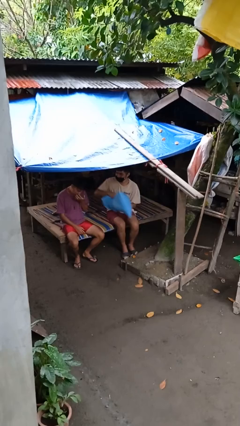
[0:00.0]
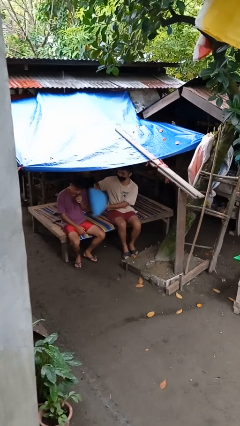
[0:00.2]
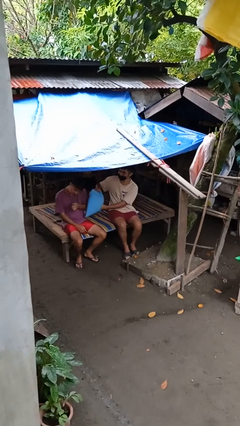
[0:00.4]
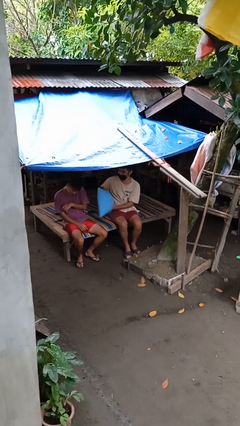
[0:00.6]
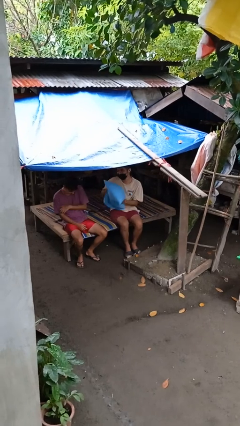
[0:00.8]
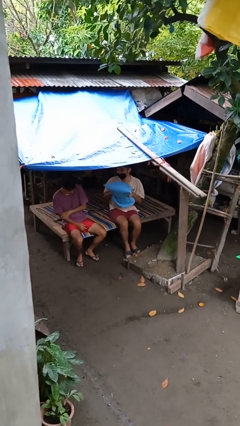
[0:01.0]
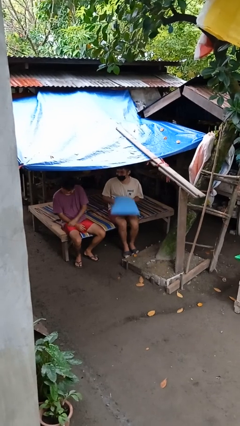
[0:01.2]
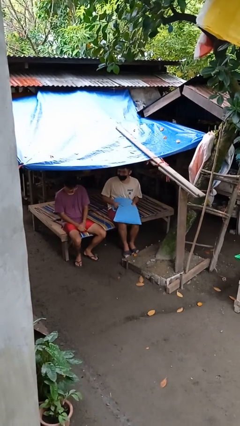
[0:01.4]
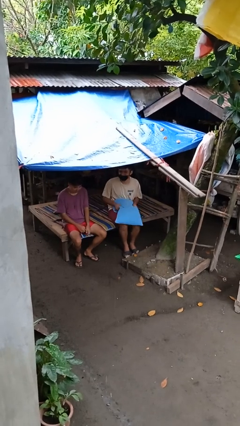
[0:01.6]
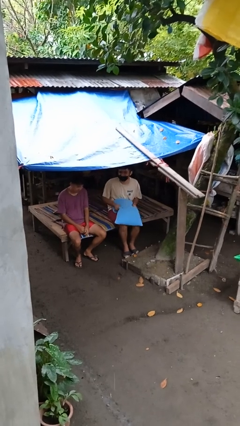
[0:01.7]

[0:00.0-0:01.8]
person hits person with pillow

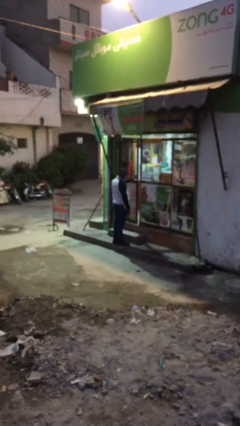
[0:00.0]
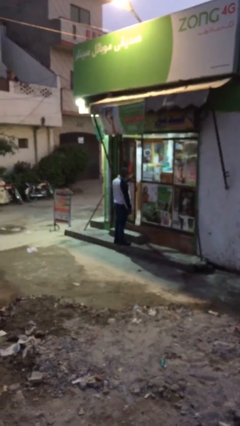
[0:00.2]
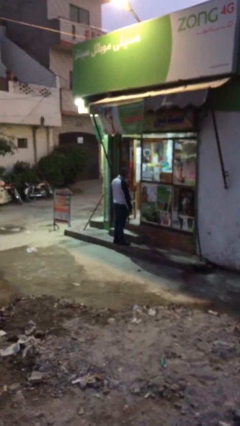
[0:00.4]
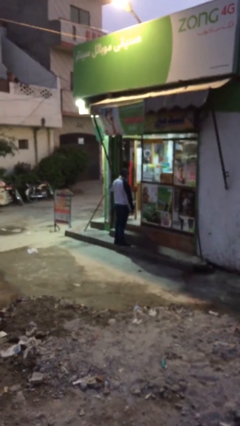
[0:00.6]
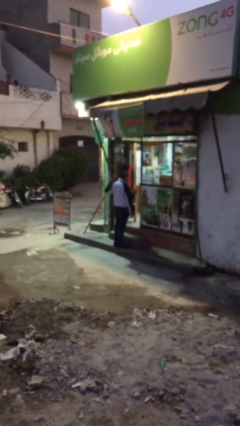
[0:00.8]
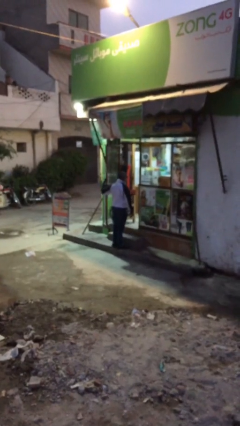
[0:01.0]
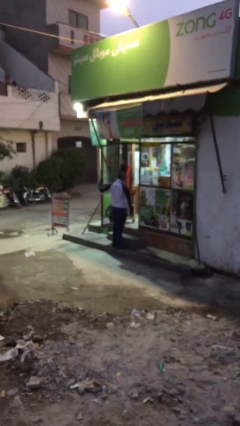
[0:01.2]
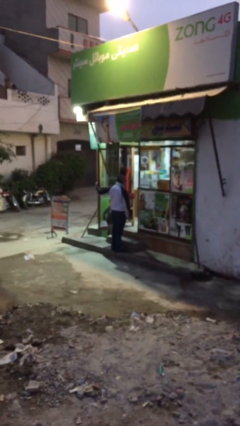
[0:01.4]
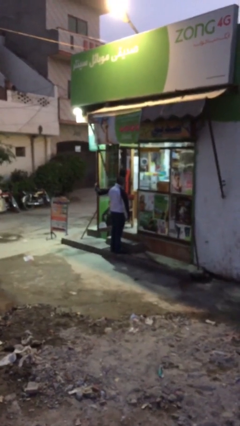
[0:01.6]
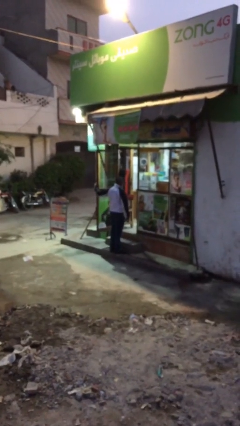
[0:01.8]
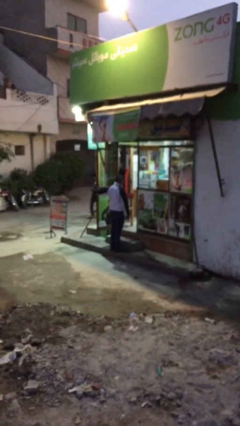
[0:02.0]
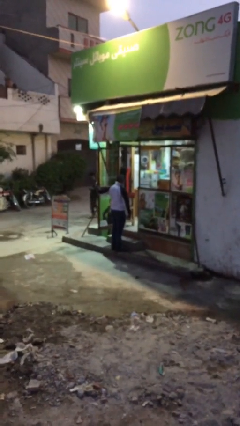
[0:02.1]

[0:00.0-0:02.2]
person opens facility door

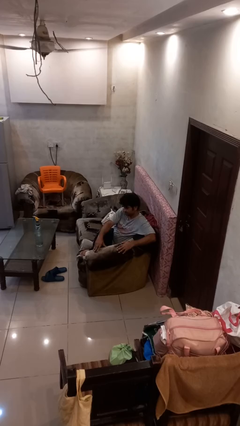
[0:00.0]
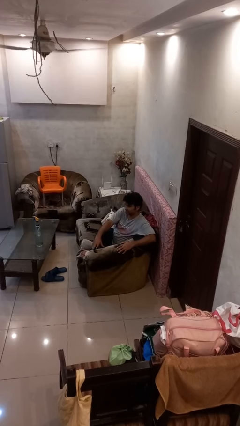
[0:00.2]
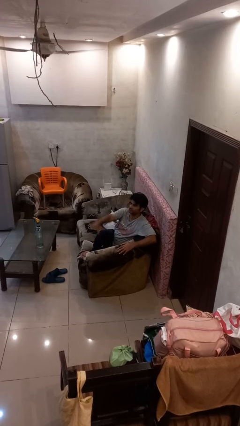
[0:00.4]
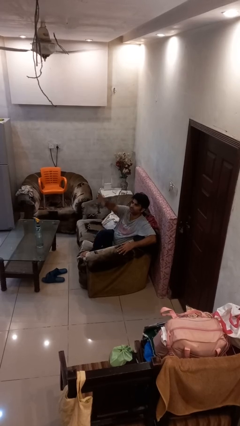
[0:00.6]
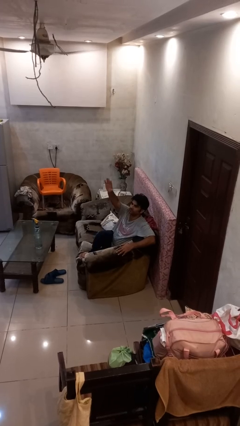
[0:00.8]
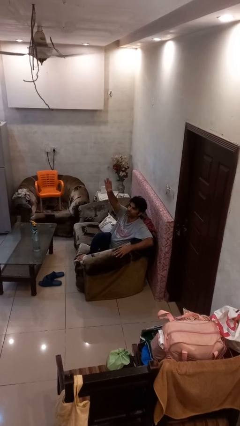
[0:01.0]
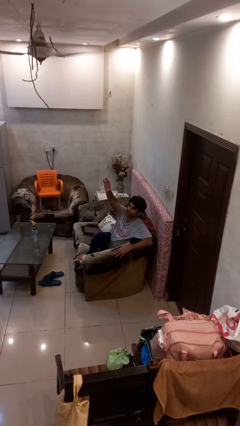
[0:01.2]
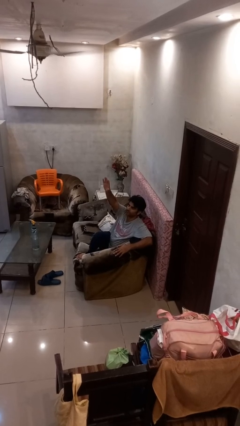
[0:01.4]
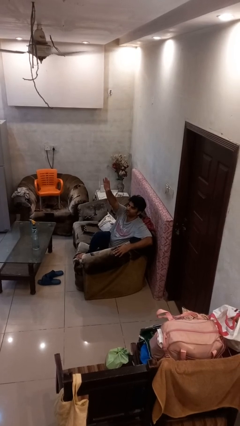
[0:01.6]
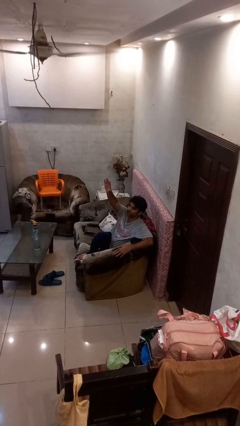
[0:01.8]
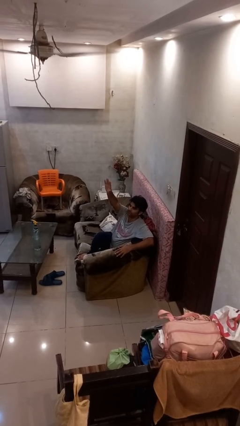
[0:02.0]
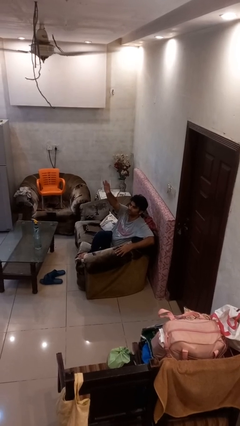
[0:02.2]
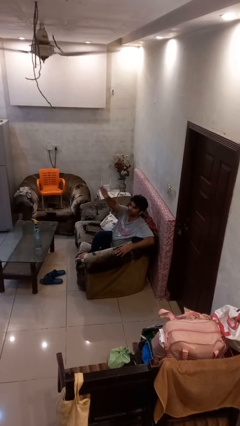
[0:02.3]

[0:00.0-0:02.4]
person gestures raise hand

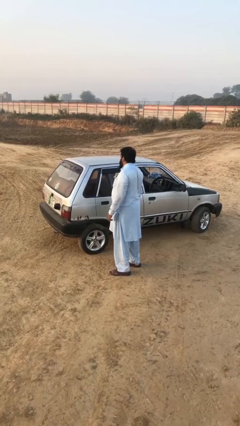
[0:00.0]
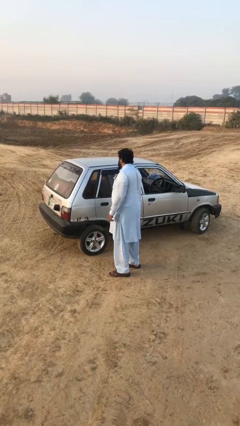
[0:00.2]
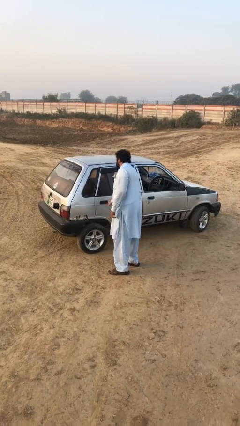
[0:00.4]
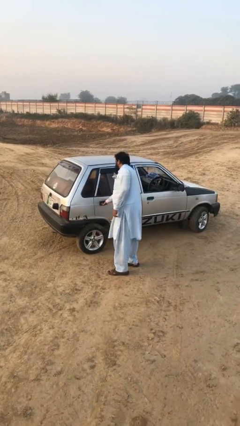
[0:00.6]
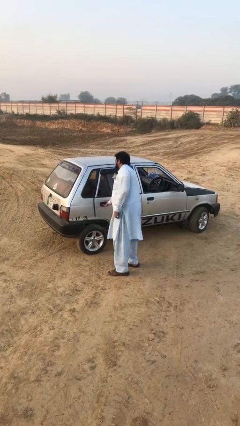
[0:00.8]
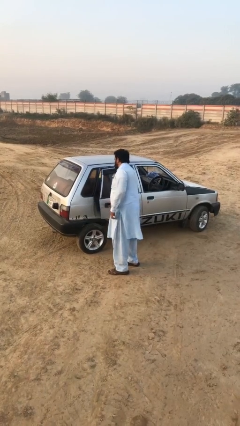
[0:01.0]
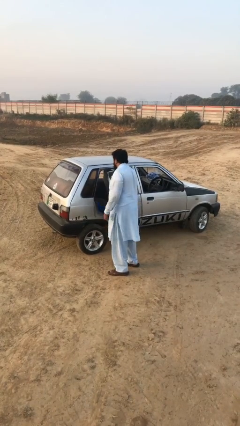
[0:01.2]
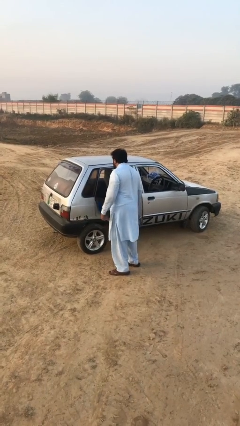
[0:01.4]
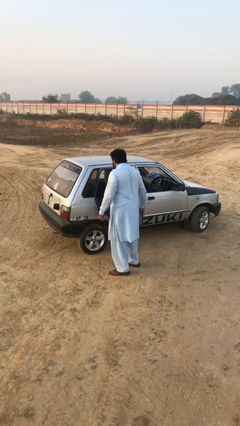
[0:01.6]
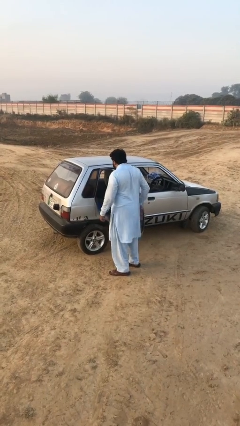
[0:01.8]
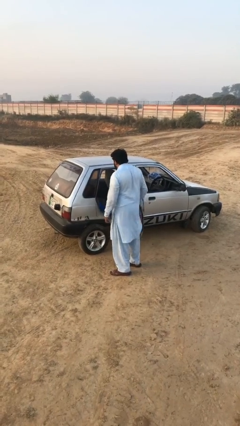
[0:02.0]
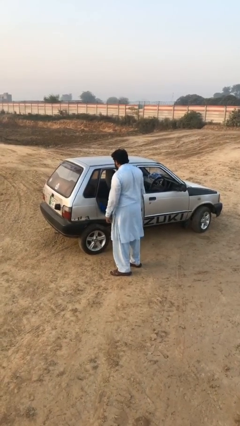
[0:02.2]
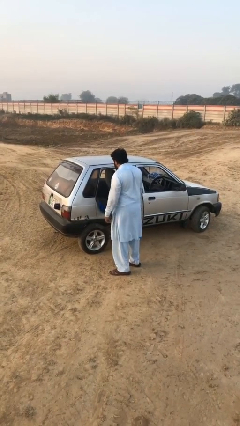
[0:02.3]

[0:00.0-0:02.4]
person opens car door

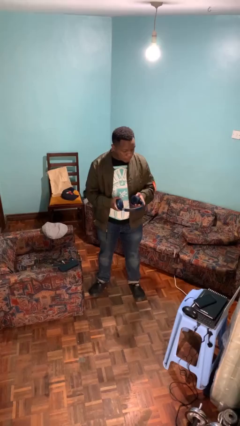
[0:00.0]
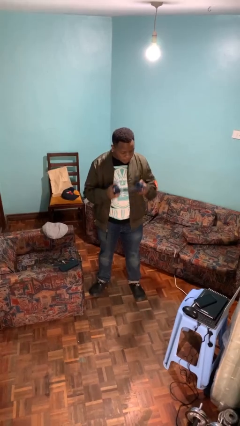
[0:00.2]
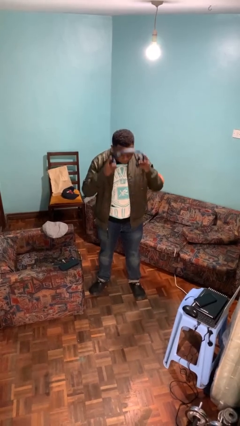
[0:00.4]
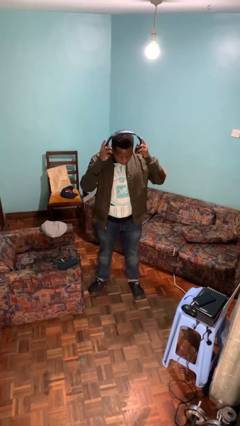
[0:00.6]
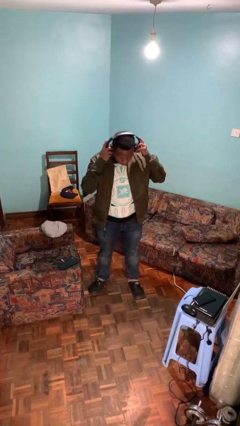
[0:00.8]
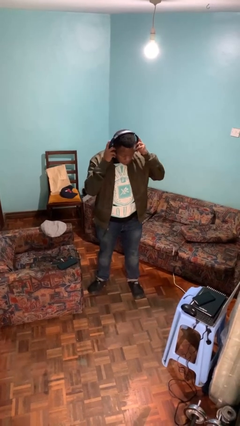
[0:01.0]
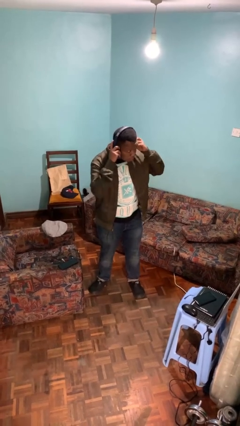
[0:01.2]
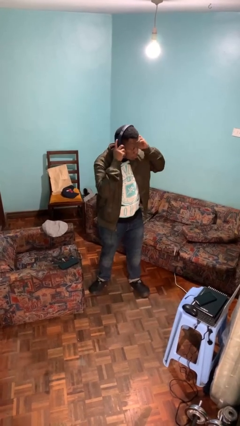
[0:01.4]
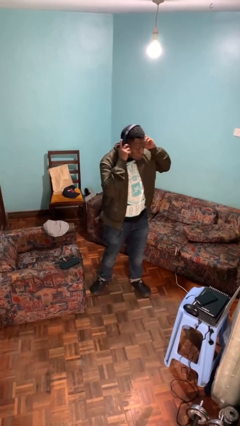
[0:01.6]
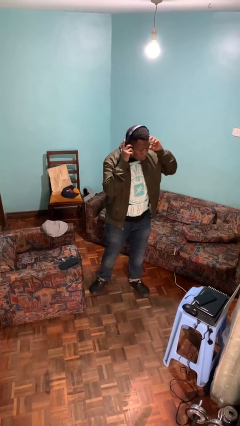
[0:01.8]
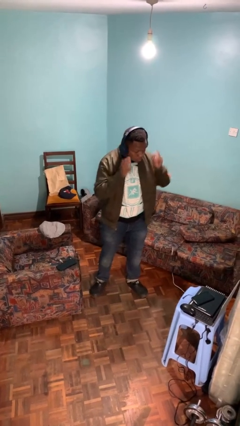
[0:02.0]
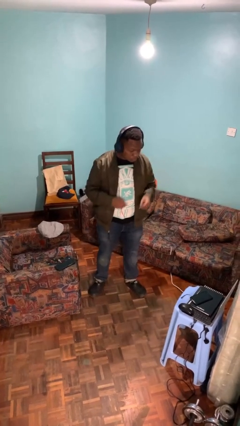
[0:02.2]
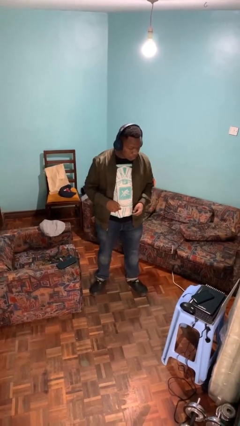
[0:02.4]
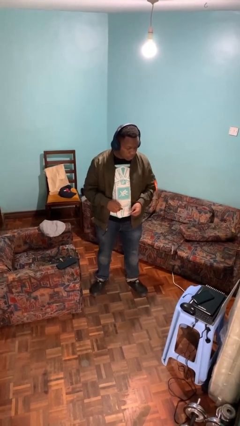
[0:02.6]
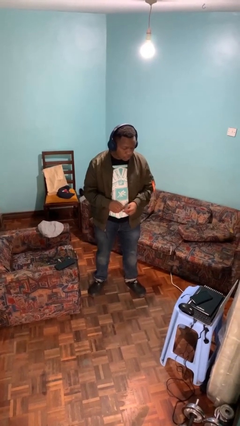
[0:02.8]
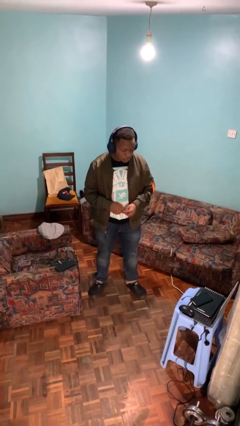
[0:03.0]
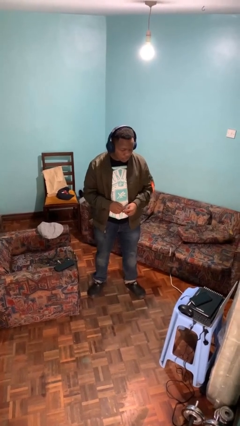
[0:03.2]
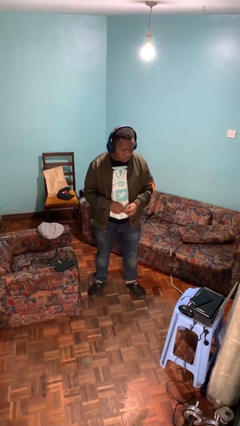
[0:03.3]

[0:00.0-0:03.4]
person puts on headphones

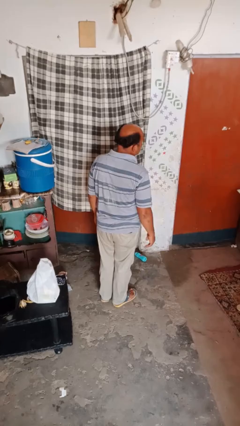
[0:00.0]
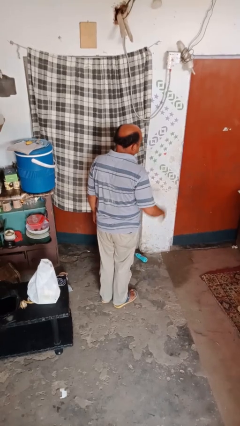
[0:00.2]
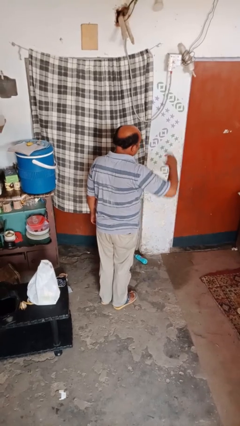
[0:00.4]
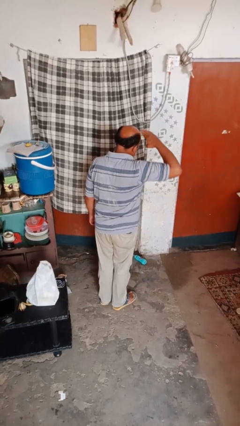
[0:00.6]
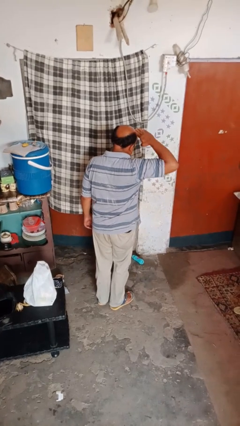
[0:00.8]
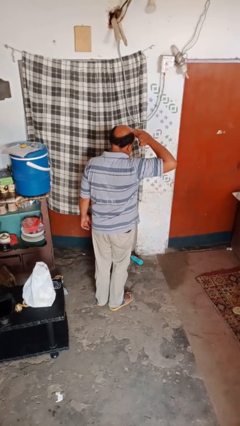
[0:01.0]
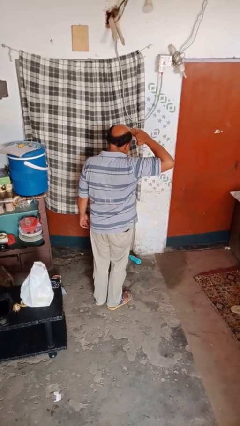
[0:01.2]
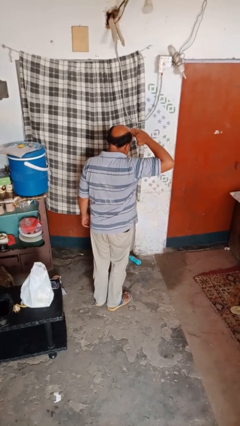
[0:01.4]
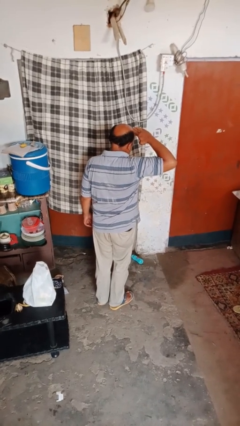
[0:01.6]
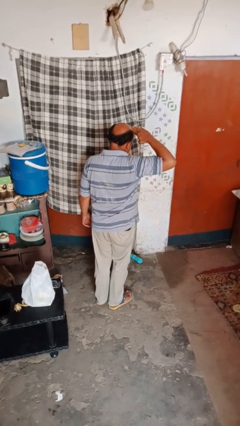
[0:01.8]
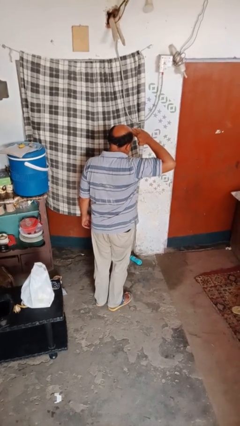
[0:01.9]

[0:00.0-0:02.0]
person salutes

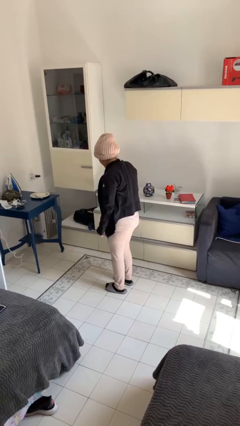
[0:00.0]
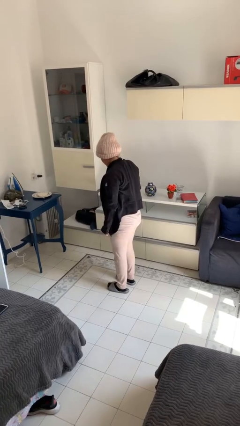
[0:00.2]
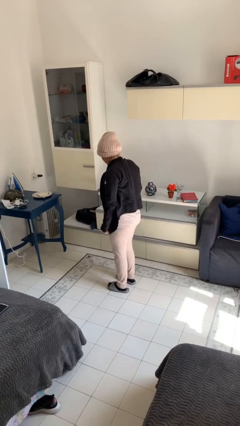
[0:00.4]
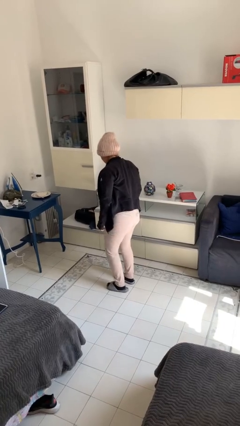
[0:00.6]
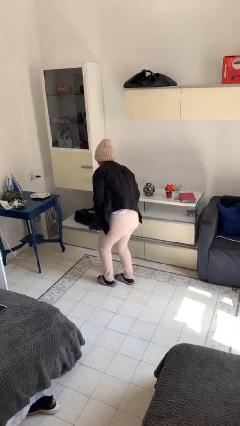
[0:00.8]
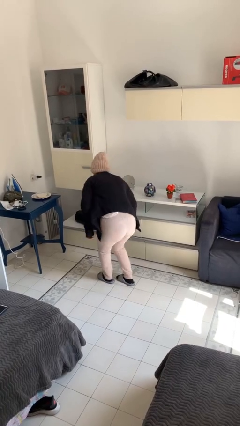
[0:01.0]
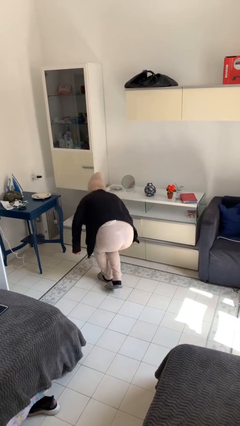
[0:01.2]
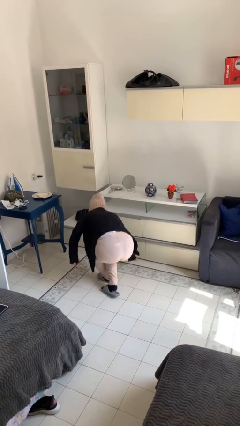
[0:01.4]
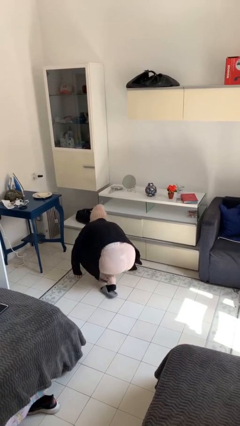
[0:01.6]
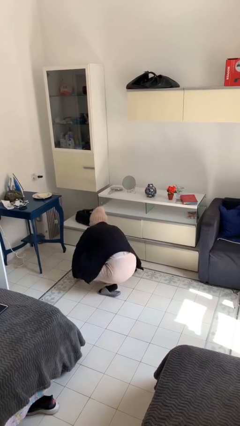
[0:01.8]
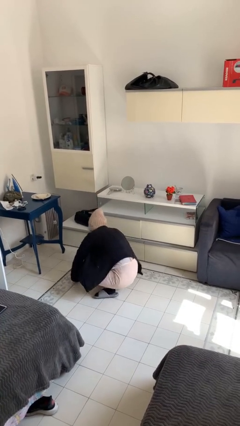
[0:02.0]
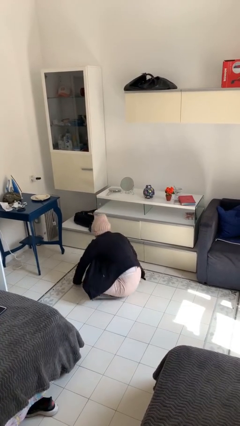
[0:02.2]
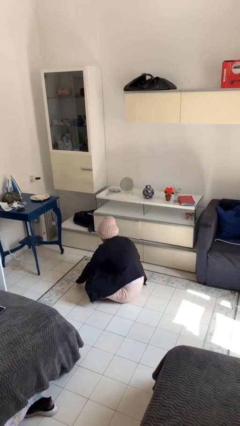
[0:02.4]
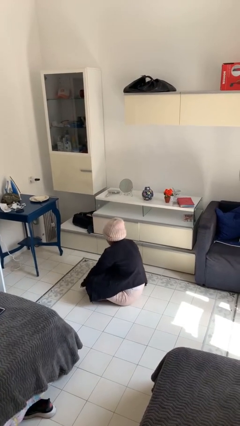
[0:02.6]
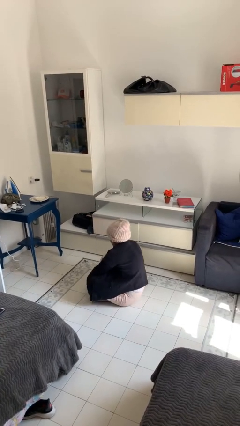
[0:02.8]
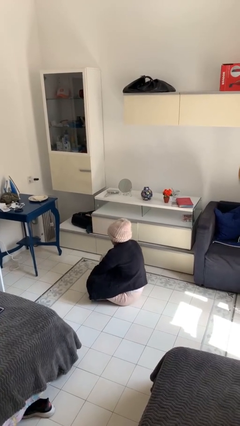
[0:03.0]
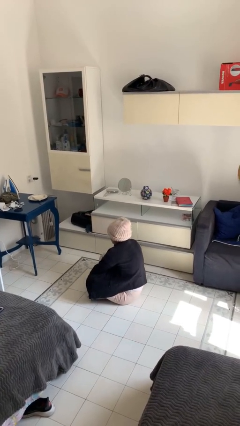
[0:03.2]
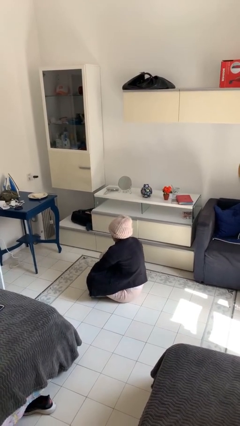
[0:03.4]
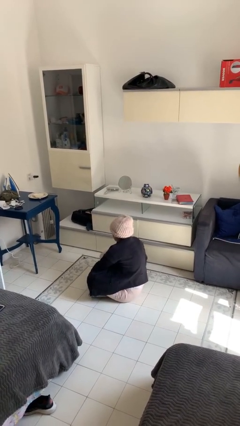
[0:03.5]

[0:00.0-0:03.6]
person sits crisscross
